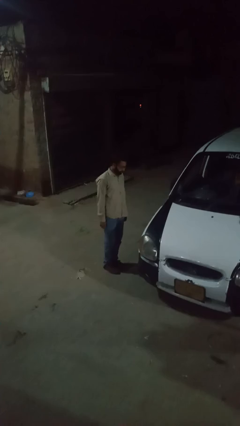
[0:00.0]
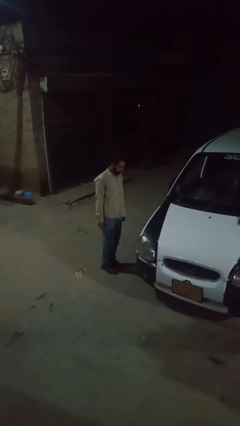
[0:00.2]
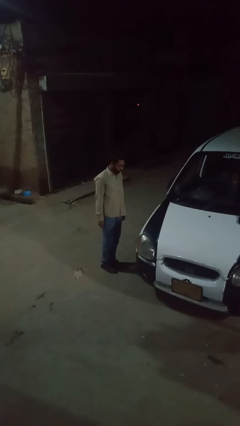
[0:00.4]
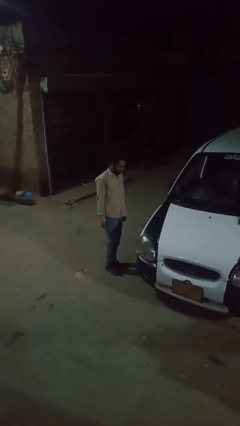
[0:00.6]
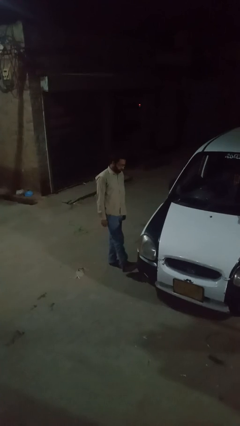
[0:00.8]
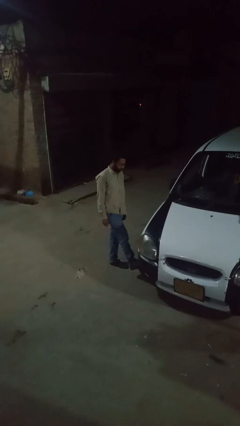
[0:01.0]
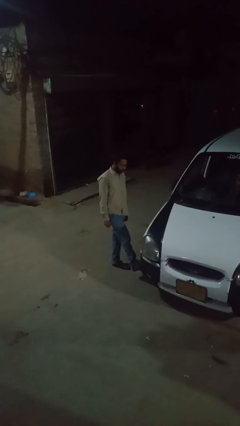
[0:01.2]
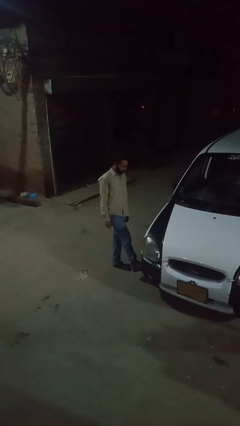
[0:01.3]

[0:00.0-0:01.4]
person kicks car tires

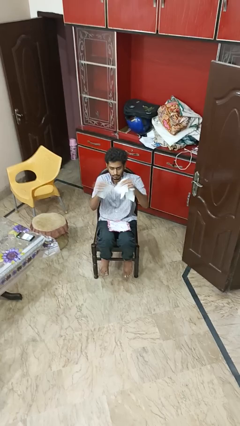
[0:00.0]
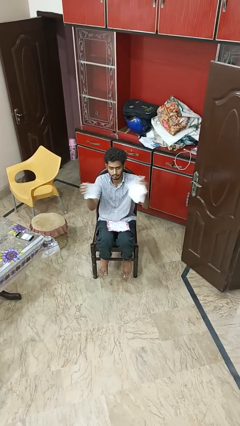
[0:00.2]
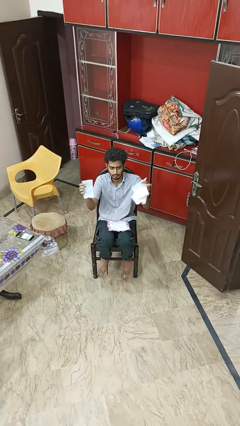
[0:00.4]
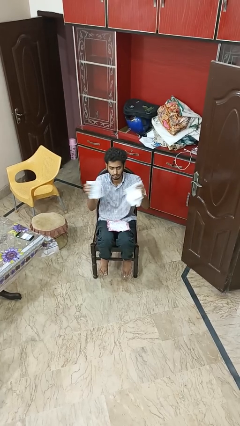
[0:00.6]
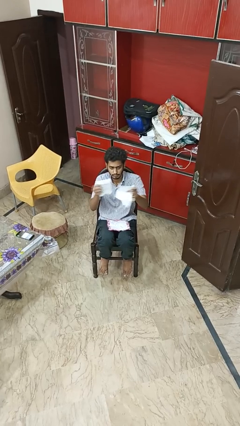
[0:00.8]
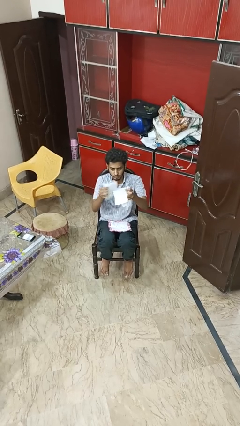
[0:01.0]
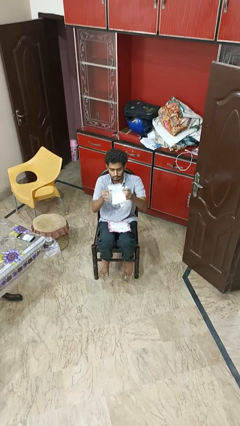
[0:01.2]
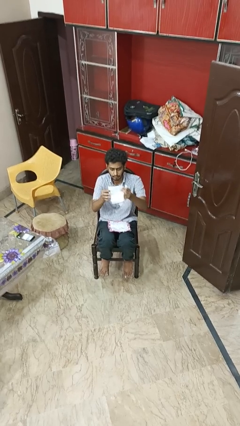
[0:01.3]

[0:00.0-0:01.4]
person tears paper

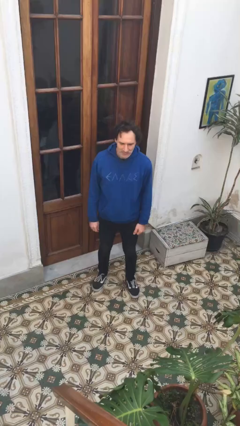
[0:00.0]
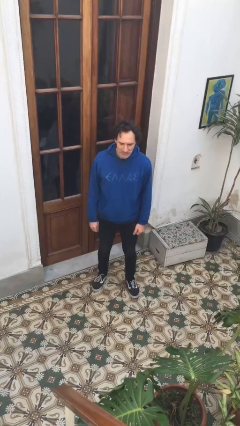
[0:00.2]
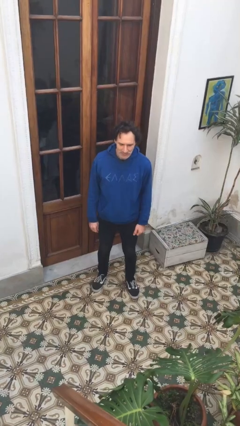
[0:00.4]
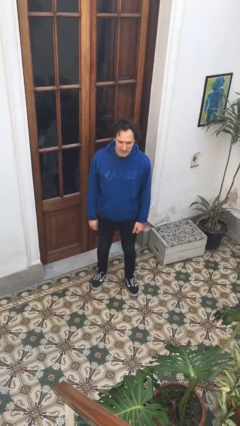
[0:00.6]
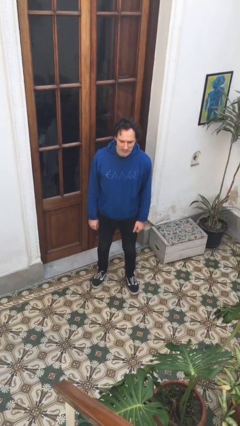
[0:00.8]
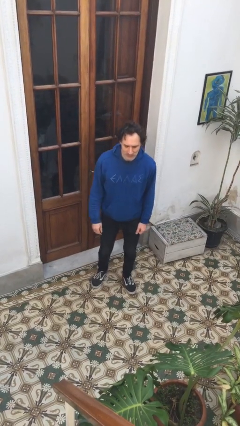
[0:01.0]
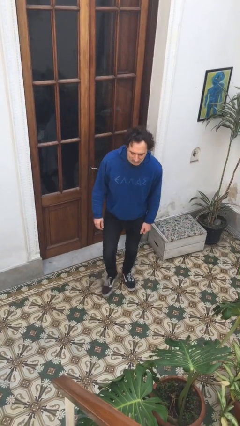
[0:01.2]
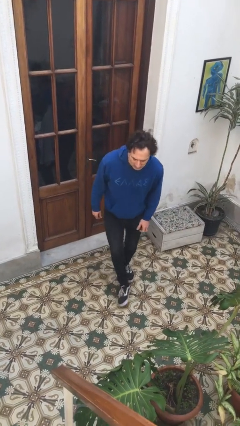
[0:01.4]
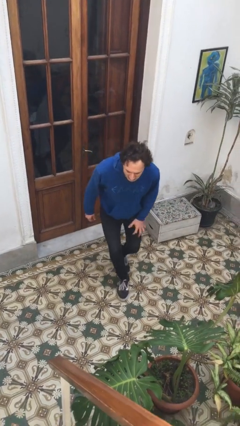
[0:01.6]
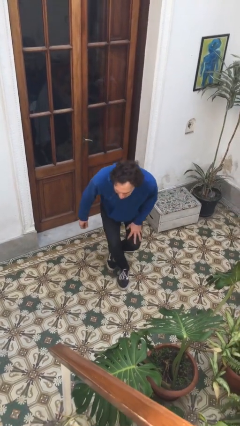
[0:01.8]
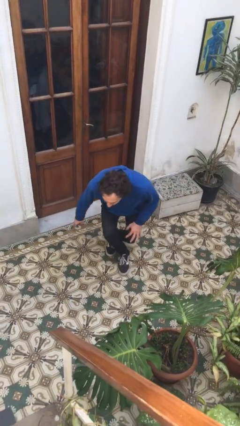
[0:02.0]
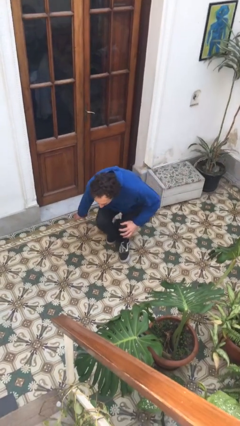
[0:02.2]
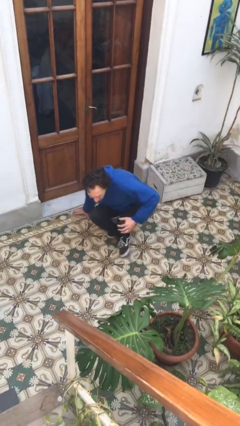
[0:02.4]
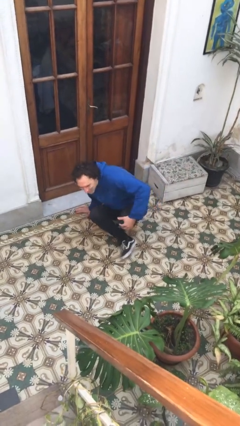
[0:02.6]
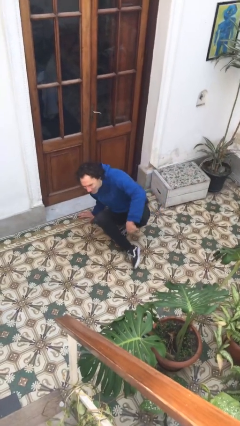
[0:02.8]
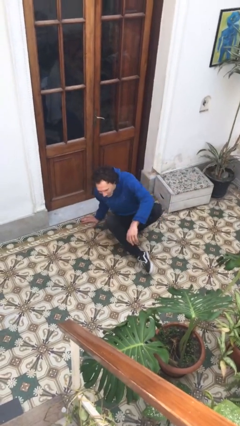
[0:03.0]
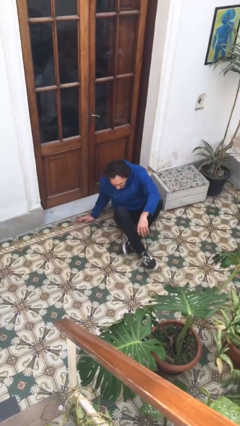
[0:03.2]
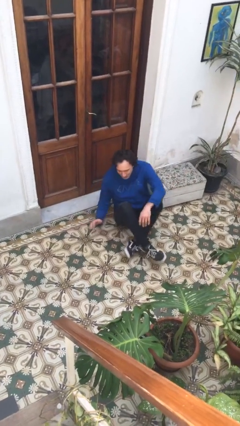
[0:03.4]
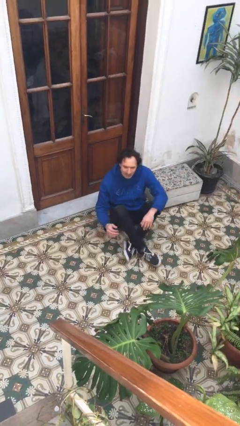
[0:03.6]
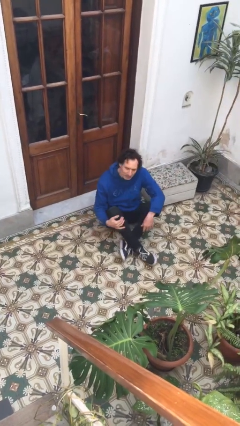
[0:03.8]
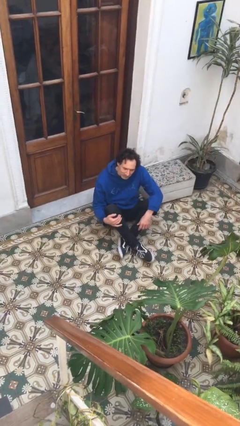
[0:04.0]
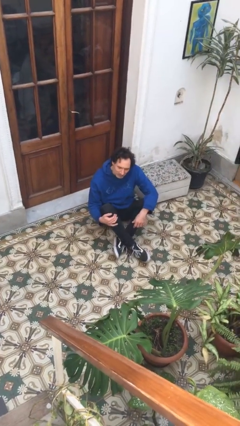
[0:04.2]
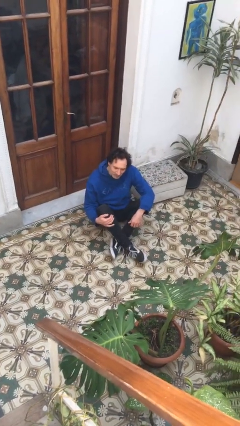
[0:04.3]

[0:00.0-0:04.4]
person sits crisscross

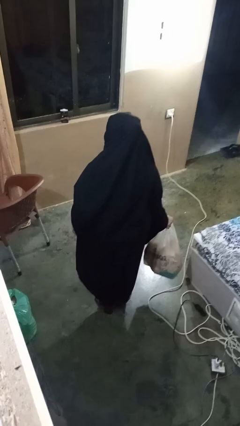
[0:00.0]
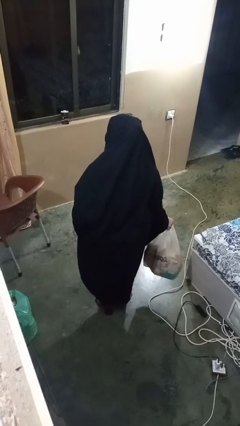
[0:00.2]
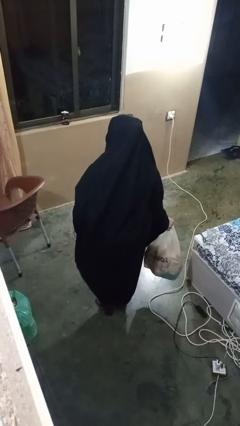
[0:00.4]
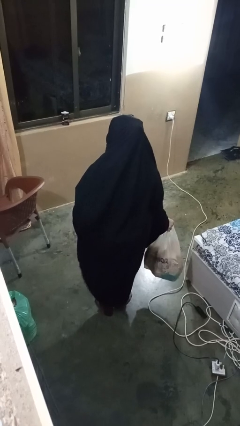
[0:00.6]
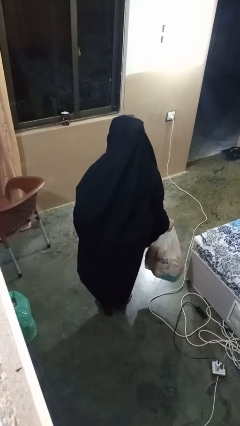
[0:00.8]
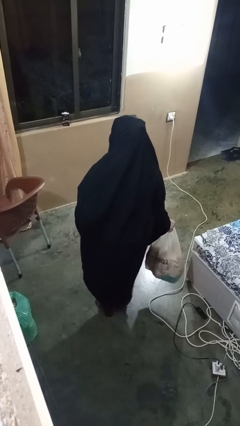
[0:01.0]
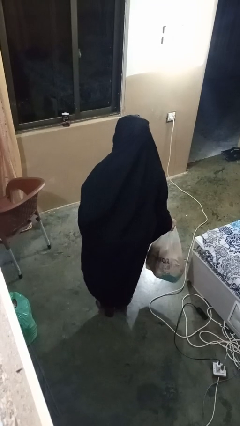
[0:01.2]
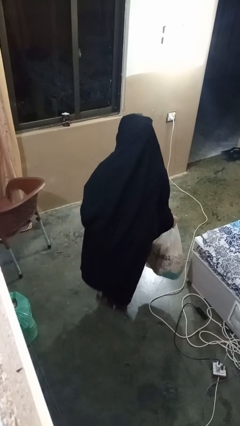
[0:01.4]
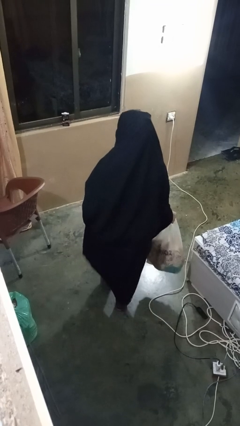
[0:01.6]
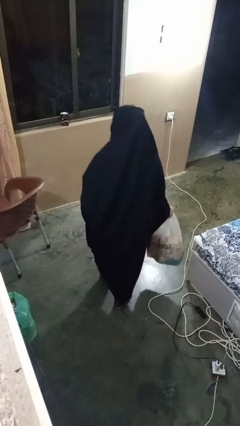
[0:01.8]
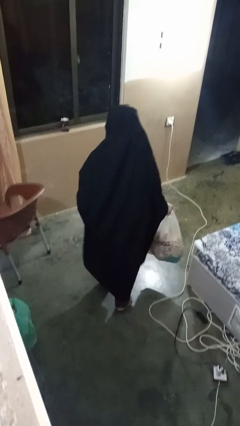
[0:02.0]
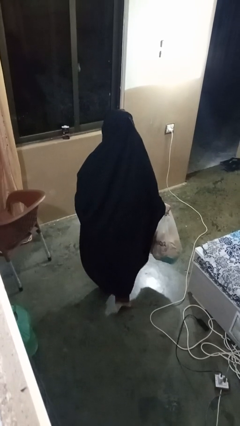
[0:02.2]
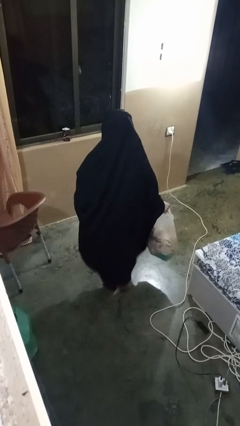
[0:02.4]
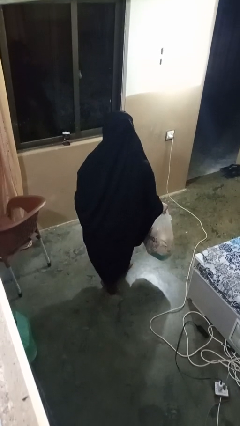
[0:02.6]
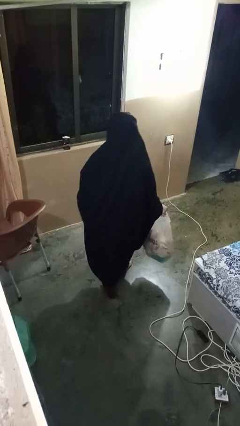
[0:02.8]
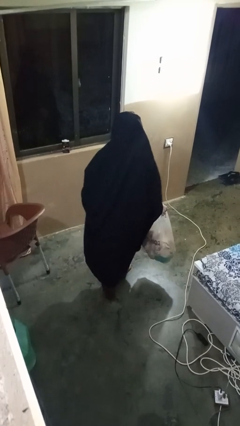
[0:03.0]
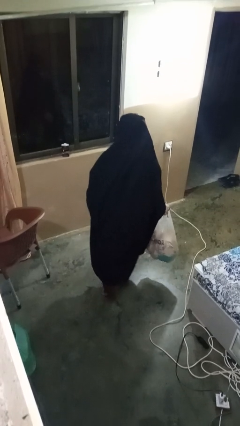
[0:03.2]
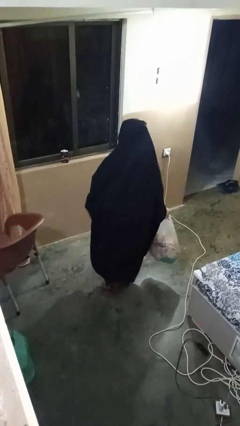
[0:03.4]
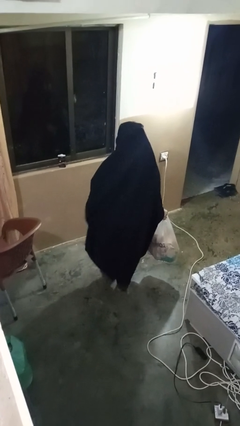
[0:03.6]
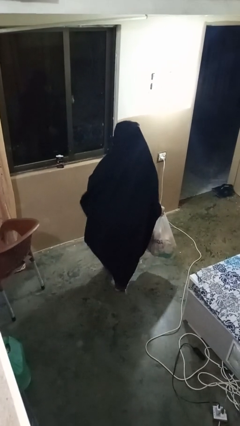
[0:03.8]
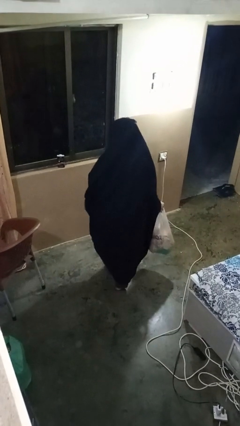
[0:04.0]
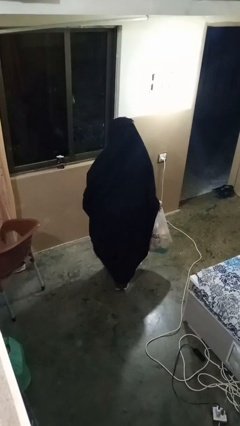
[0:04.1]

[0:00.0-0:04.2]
person carries groceries

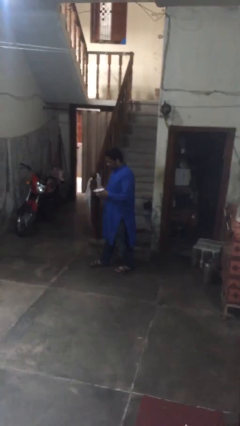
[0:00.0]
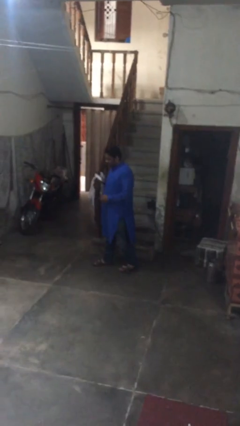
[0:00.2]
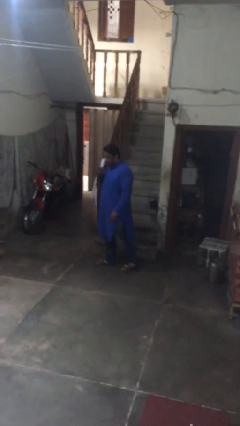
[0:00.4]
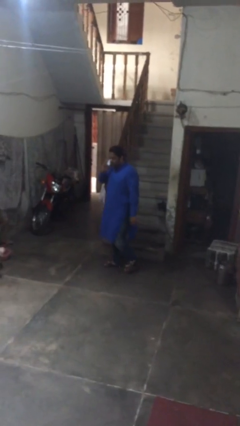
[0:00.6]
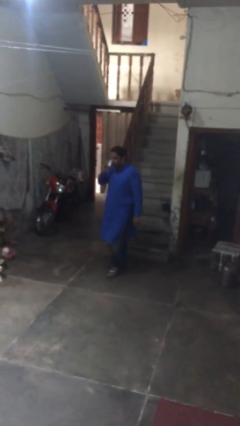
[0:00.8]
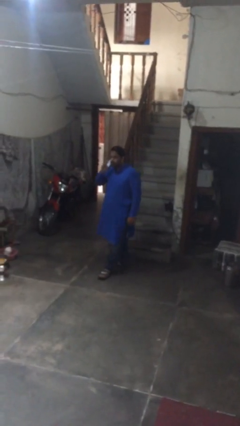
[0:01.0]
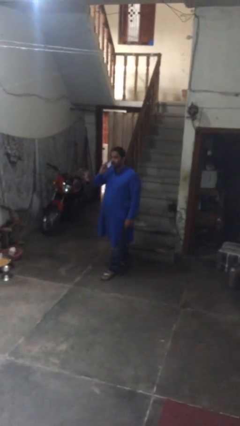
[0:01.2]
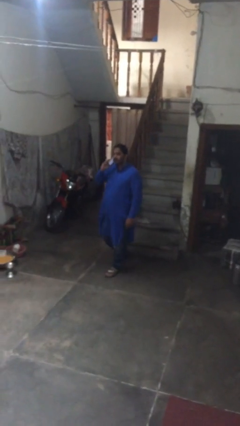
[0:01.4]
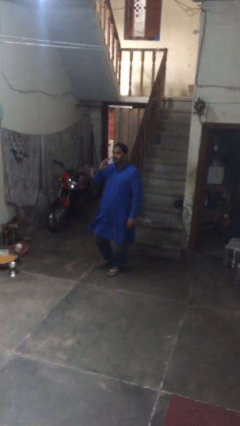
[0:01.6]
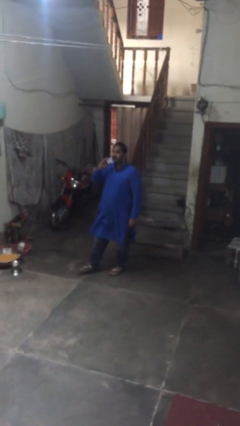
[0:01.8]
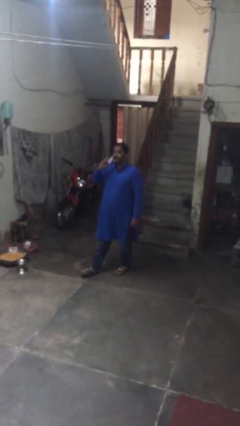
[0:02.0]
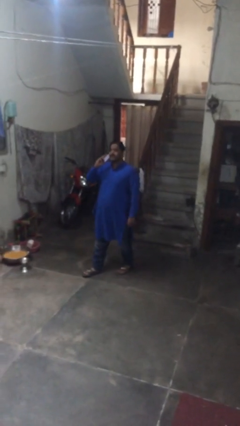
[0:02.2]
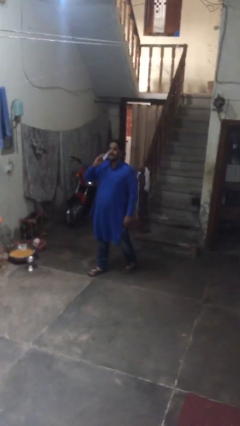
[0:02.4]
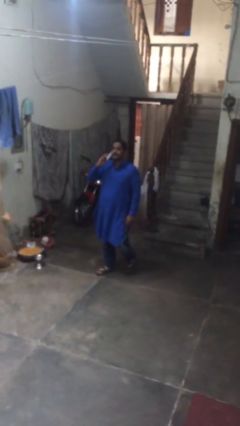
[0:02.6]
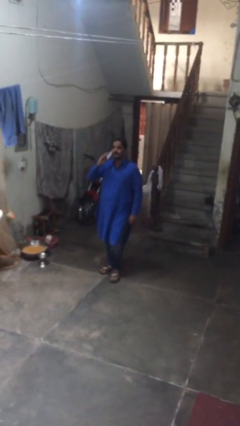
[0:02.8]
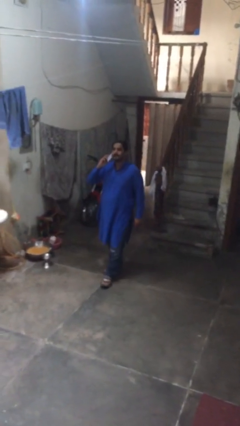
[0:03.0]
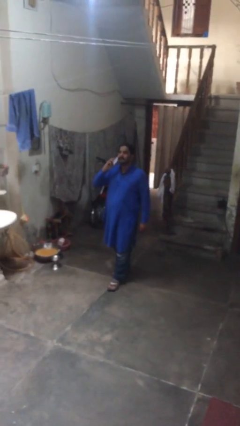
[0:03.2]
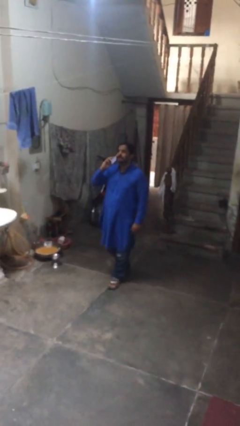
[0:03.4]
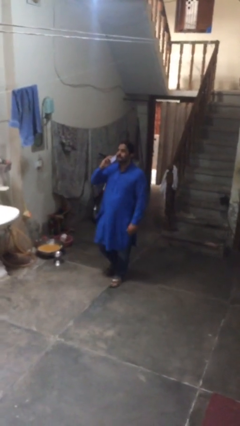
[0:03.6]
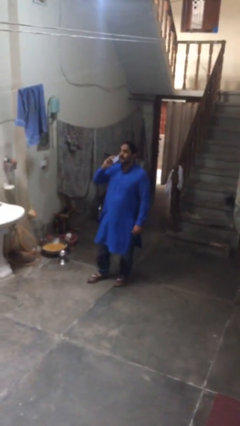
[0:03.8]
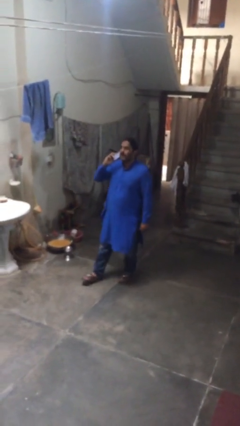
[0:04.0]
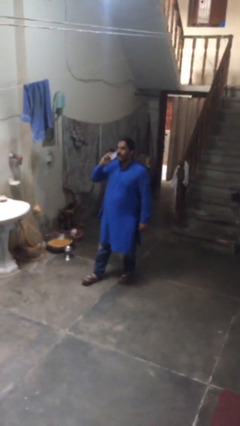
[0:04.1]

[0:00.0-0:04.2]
person talks on phone

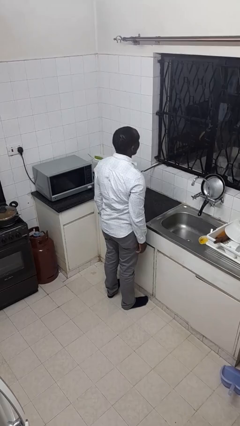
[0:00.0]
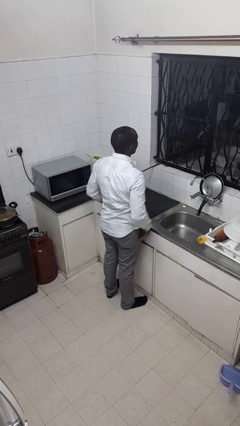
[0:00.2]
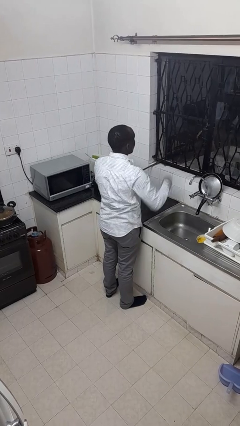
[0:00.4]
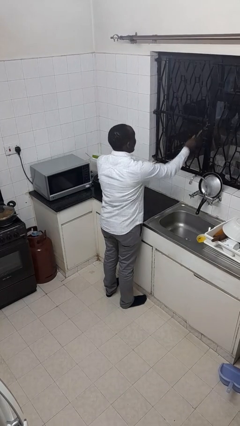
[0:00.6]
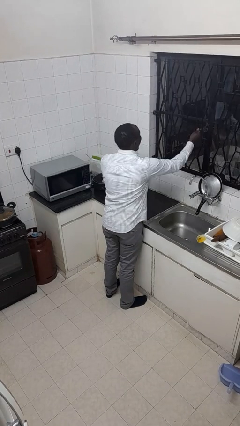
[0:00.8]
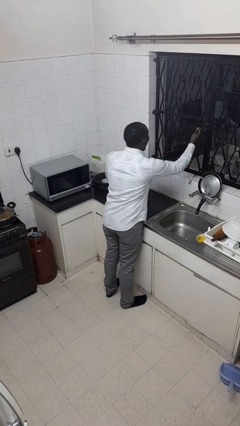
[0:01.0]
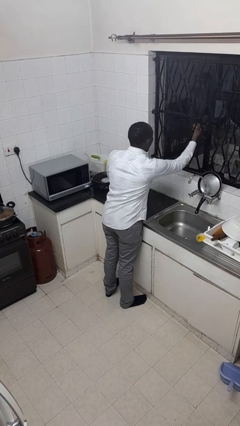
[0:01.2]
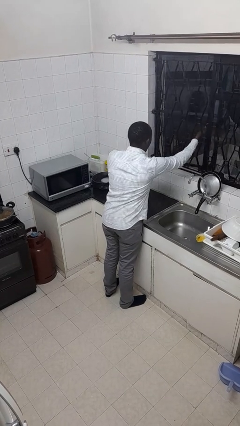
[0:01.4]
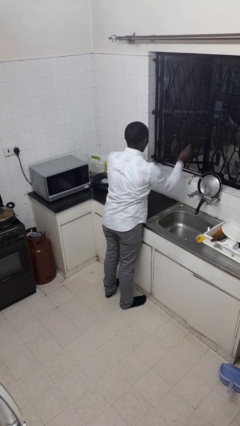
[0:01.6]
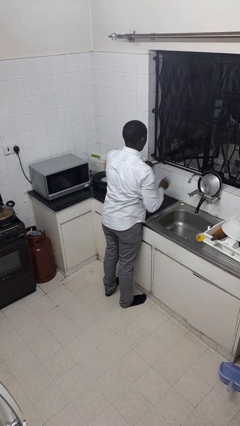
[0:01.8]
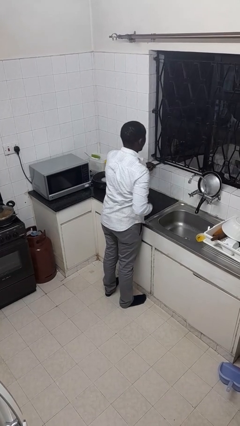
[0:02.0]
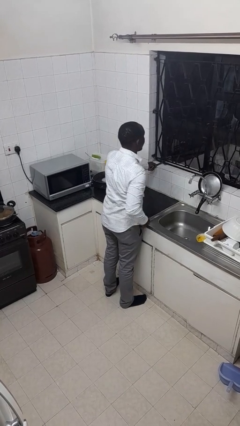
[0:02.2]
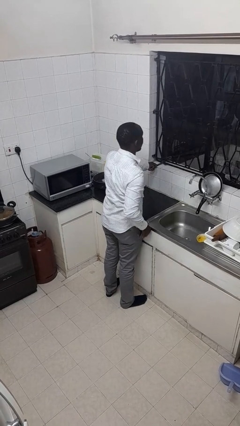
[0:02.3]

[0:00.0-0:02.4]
person opens home window
